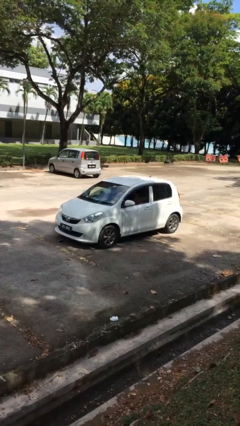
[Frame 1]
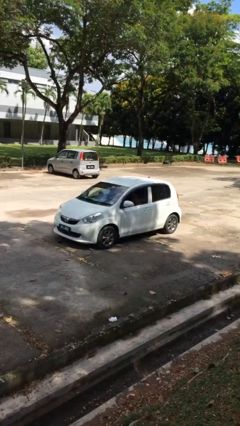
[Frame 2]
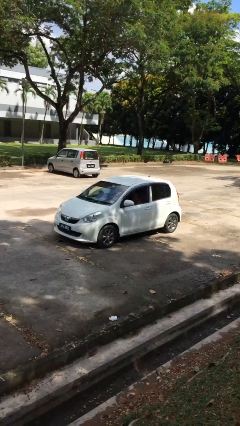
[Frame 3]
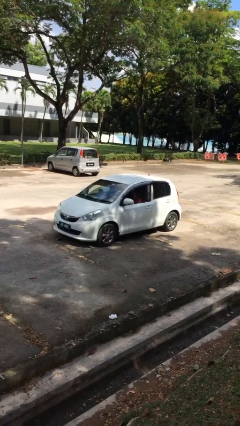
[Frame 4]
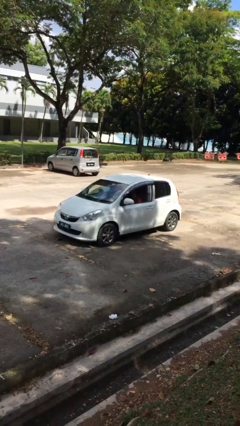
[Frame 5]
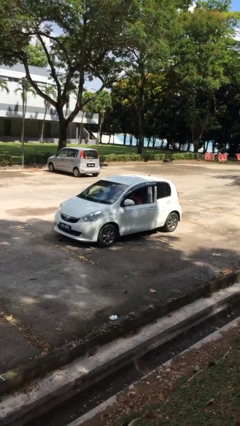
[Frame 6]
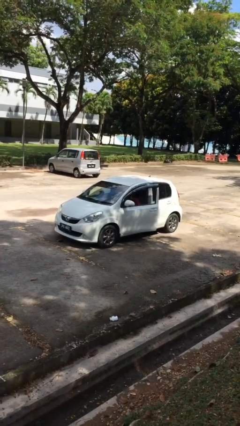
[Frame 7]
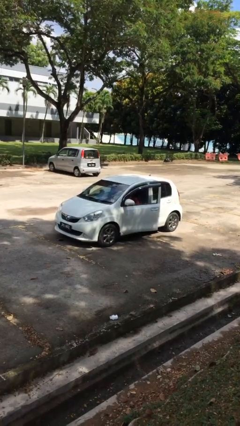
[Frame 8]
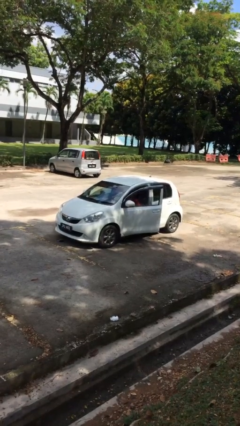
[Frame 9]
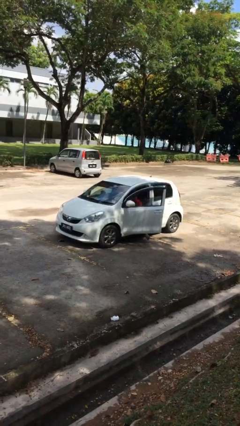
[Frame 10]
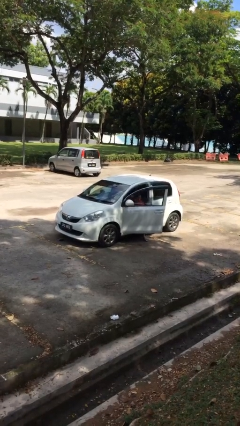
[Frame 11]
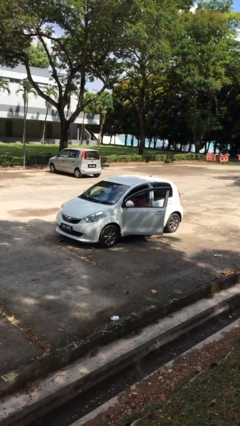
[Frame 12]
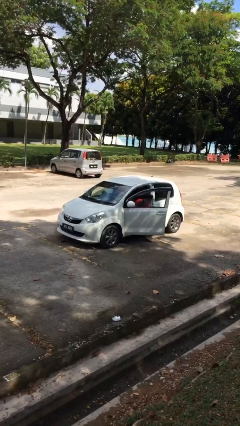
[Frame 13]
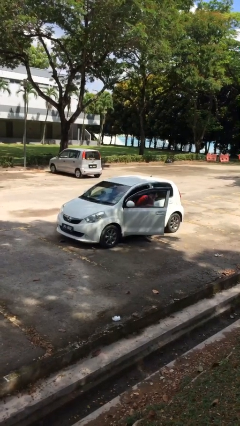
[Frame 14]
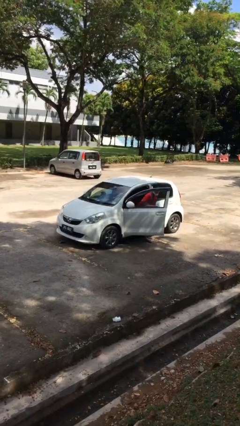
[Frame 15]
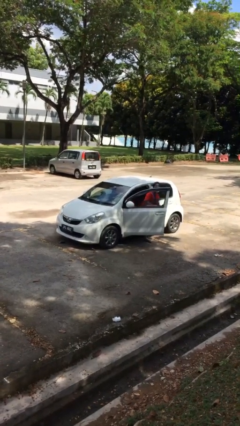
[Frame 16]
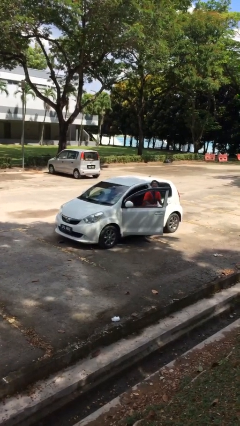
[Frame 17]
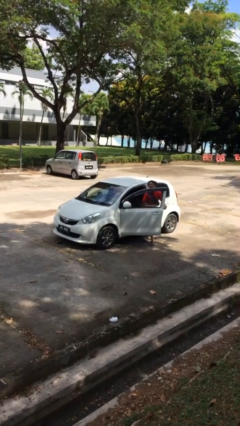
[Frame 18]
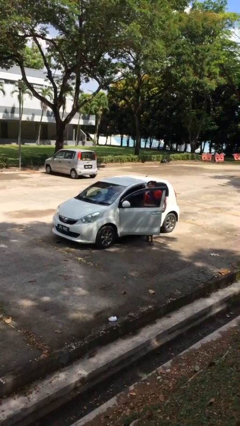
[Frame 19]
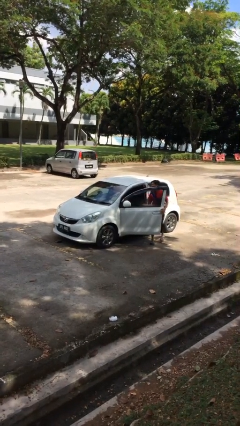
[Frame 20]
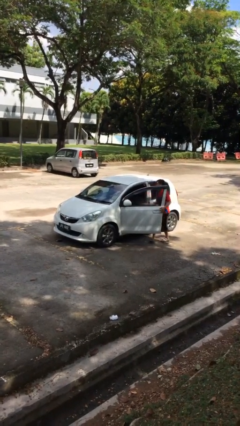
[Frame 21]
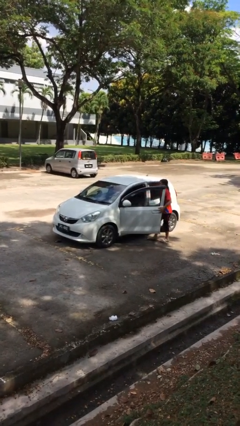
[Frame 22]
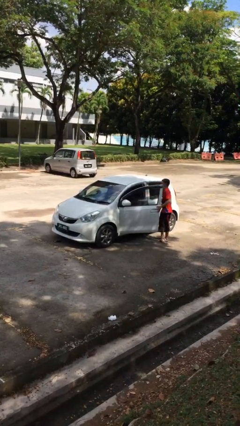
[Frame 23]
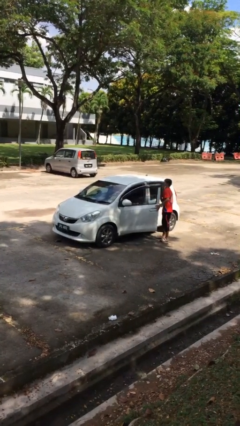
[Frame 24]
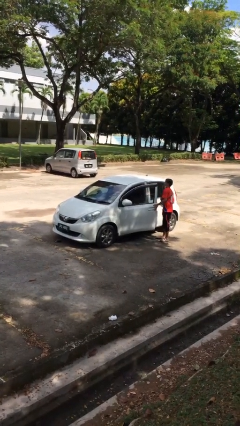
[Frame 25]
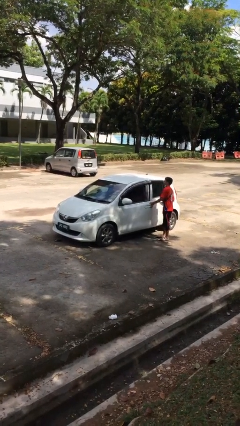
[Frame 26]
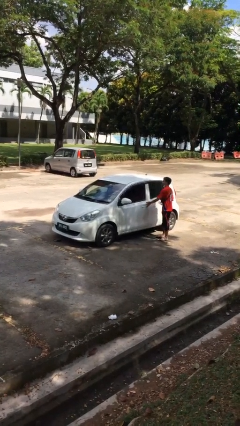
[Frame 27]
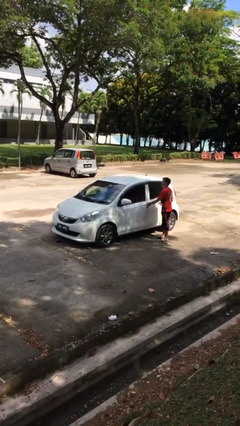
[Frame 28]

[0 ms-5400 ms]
car drops off person

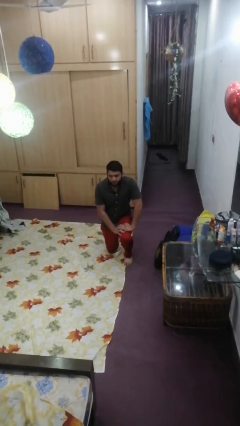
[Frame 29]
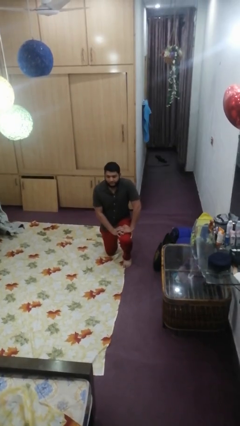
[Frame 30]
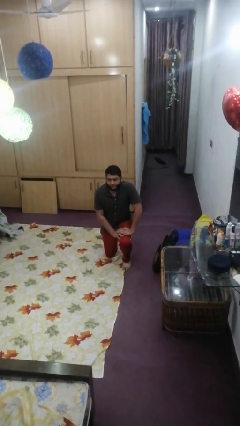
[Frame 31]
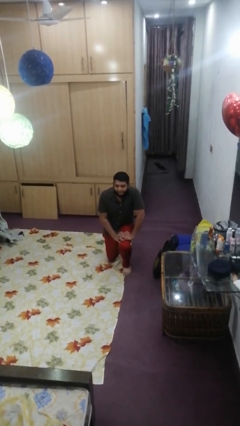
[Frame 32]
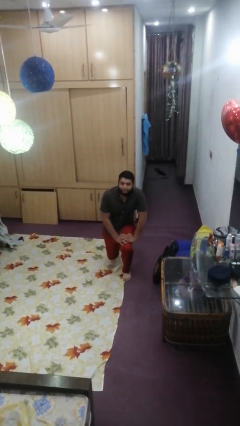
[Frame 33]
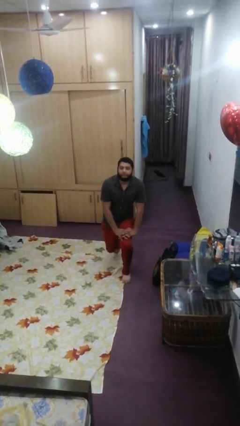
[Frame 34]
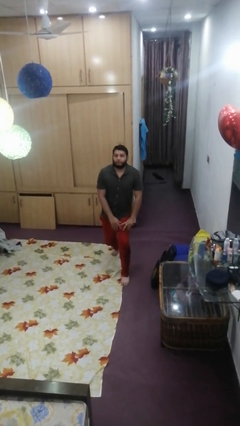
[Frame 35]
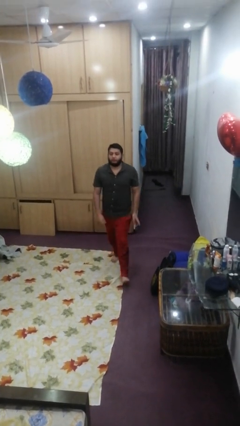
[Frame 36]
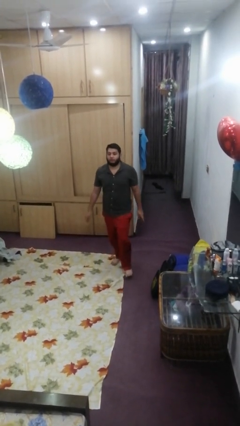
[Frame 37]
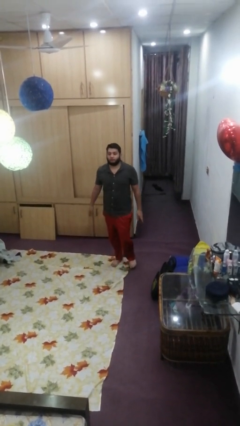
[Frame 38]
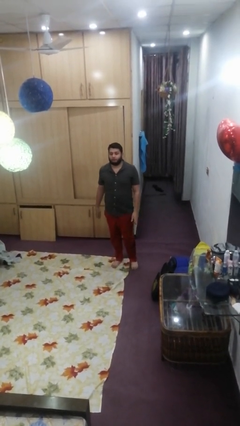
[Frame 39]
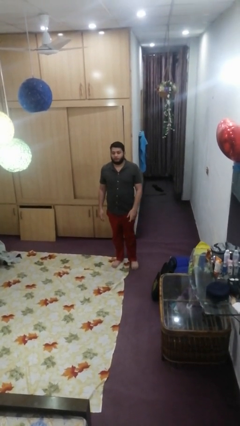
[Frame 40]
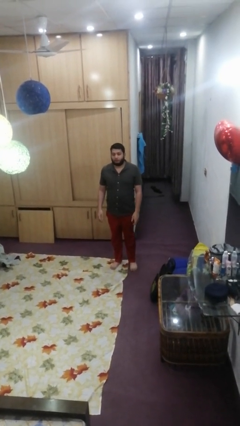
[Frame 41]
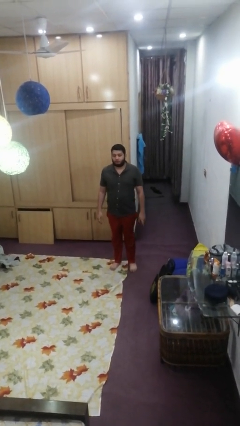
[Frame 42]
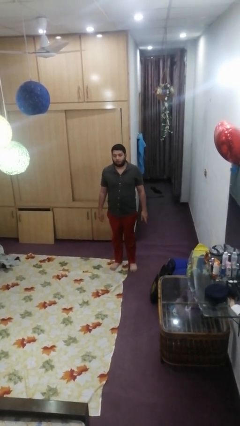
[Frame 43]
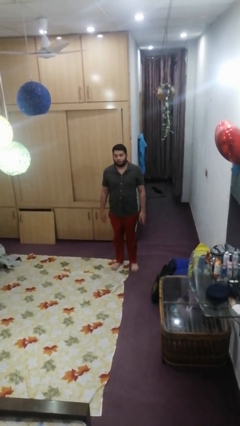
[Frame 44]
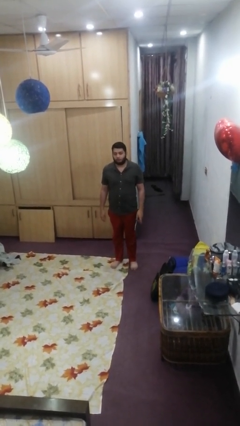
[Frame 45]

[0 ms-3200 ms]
person stands up from floor

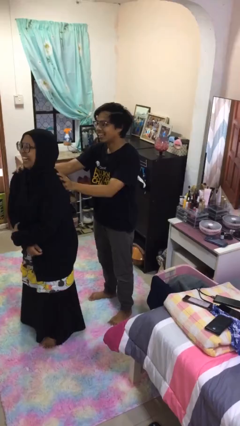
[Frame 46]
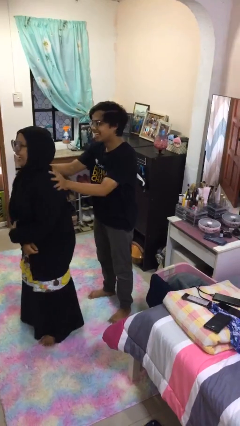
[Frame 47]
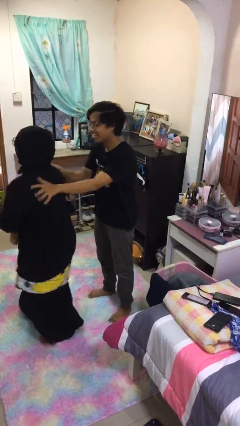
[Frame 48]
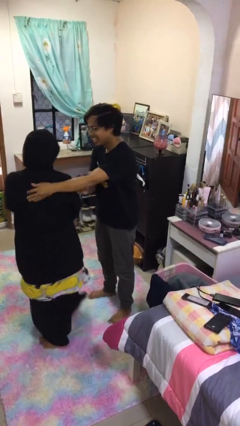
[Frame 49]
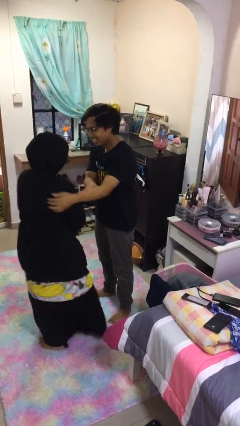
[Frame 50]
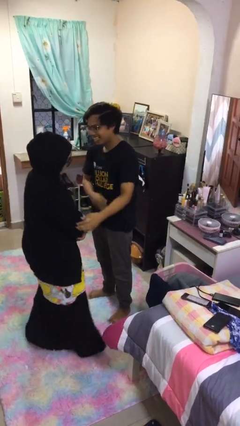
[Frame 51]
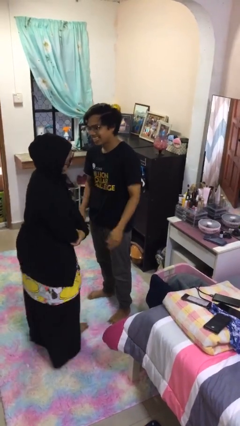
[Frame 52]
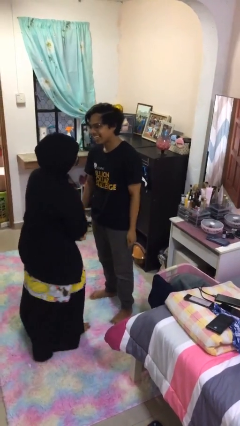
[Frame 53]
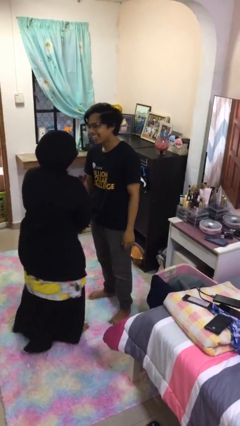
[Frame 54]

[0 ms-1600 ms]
person spins person around

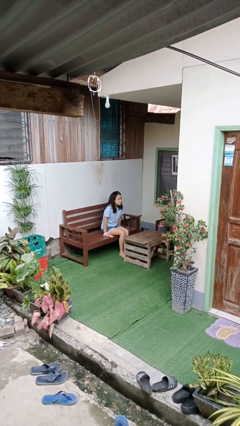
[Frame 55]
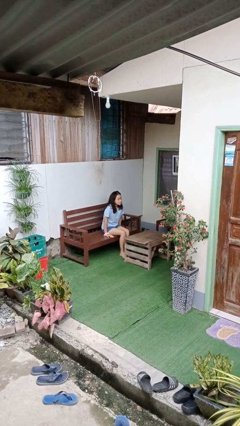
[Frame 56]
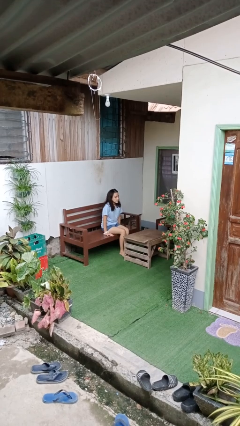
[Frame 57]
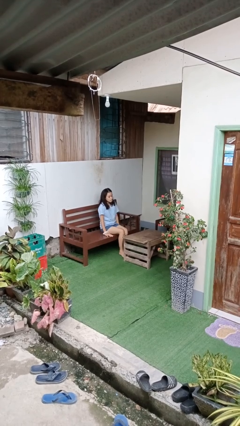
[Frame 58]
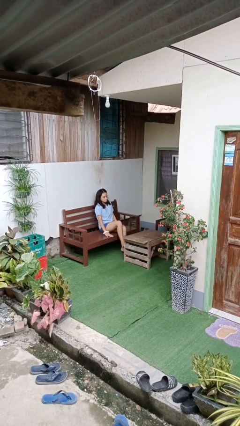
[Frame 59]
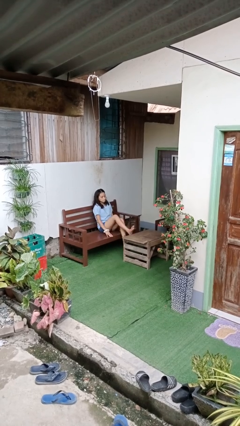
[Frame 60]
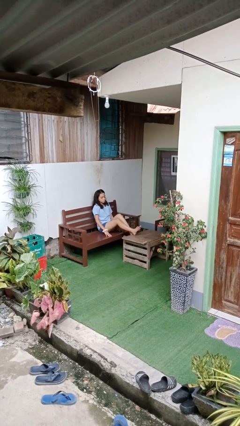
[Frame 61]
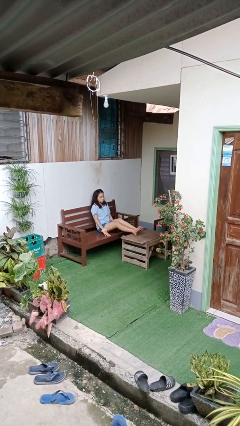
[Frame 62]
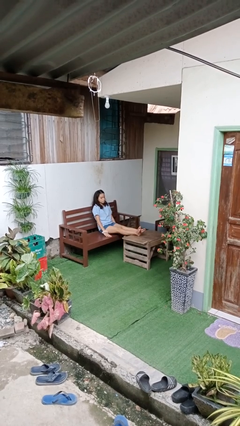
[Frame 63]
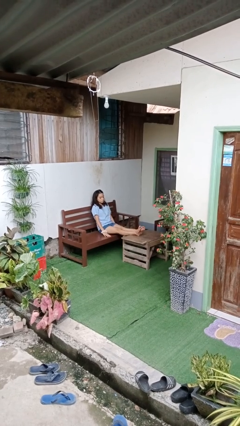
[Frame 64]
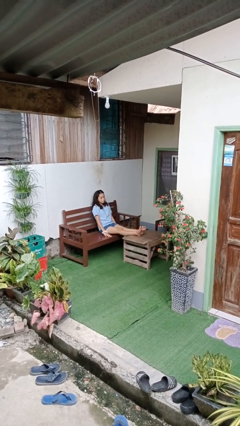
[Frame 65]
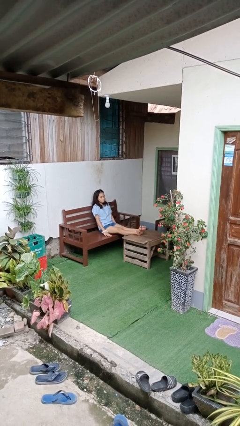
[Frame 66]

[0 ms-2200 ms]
person puts feet up

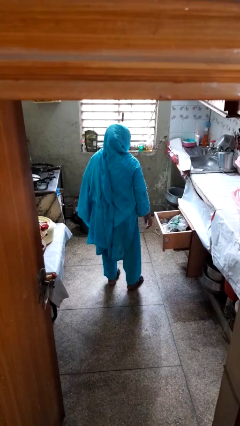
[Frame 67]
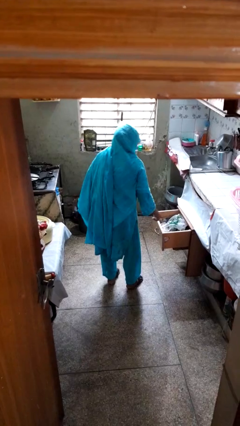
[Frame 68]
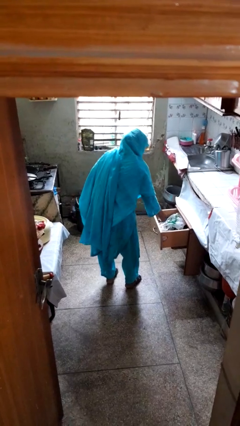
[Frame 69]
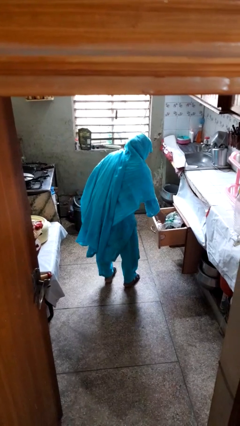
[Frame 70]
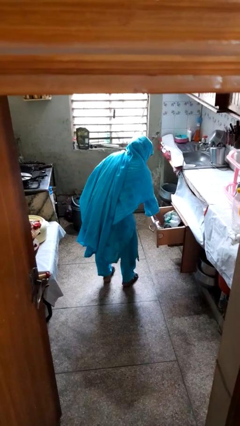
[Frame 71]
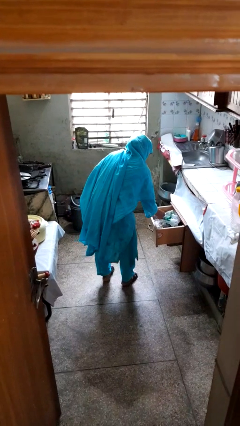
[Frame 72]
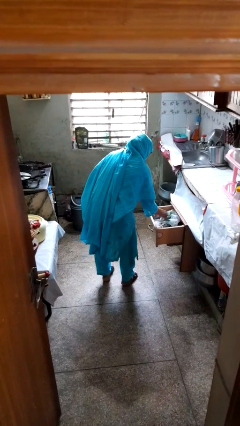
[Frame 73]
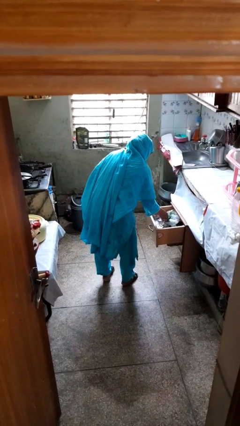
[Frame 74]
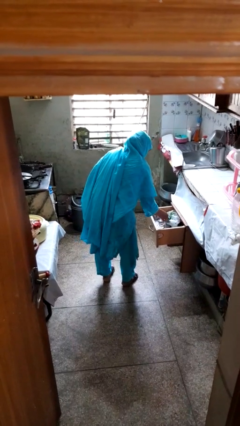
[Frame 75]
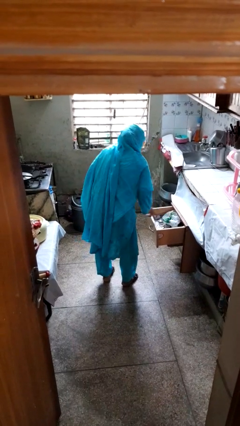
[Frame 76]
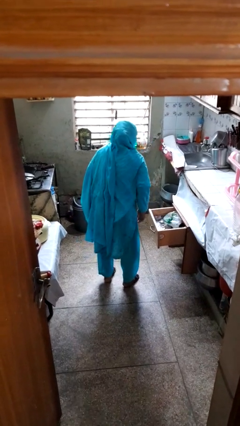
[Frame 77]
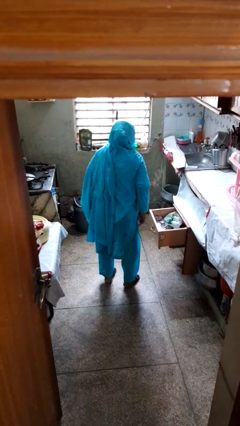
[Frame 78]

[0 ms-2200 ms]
person searches in kitchen drawer

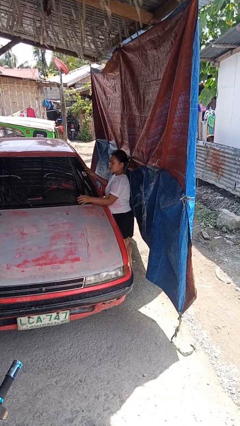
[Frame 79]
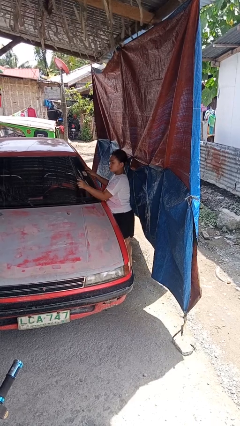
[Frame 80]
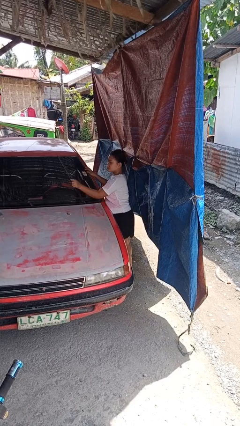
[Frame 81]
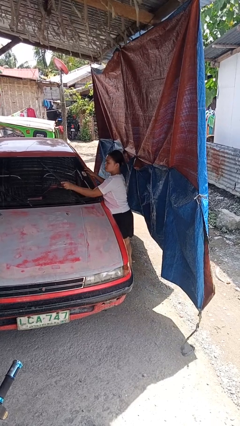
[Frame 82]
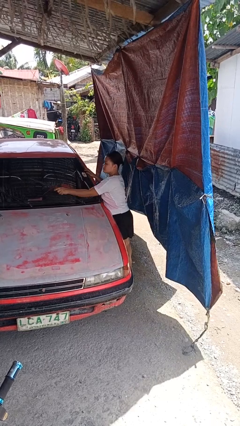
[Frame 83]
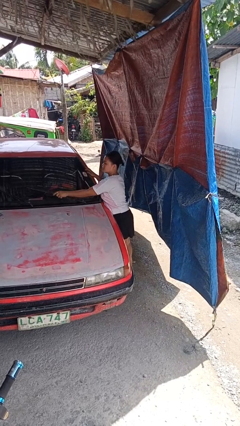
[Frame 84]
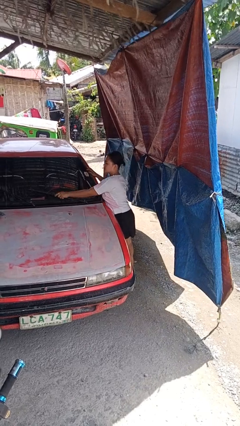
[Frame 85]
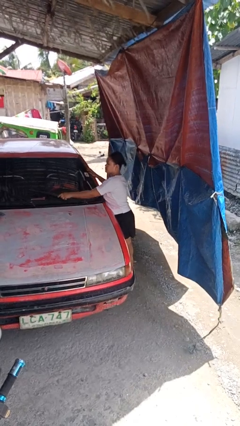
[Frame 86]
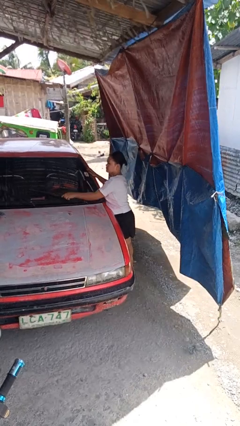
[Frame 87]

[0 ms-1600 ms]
person flips down car wipers

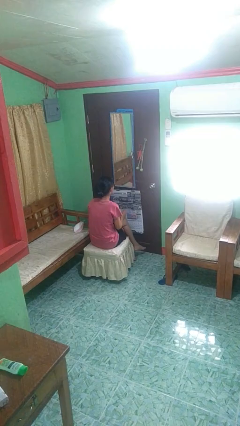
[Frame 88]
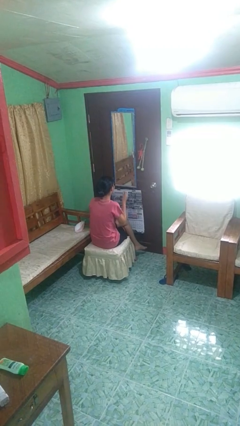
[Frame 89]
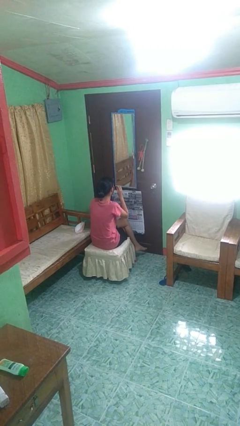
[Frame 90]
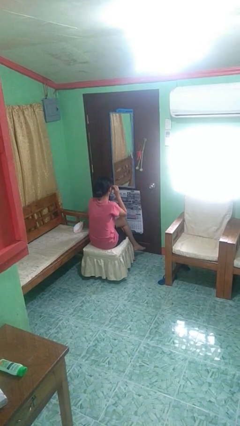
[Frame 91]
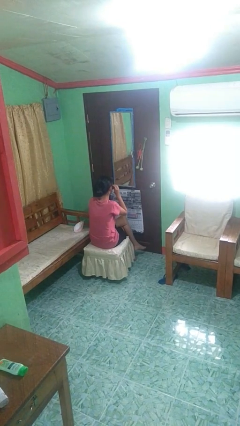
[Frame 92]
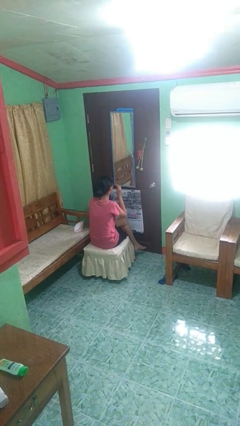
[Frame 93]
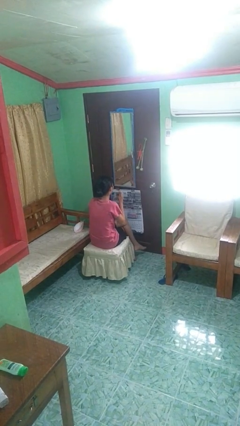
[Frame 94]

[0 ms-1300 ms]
person takes off sunglasses
